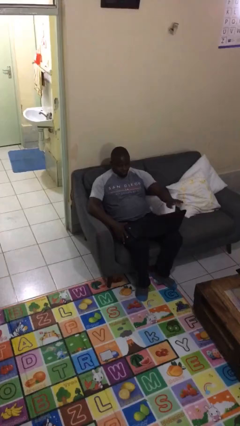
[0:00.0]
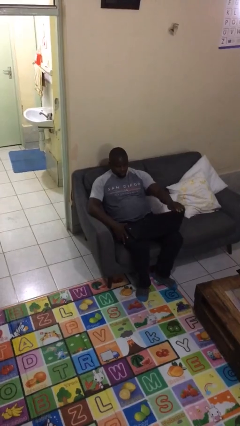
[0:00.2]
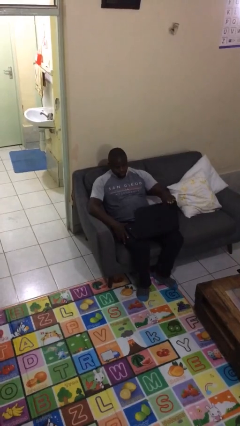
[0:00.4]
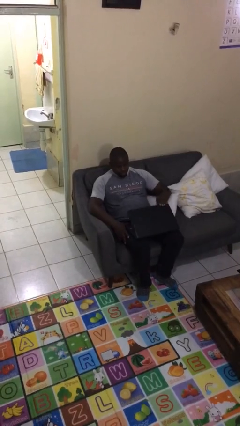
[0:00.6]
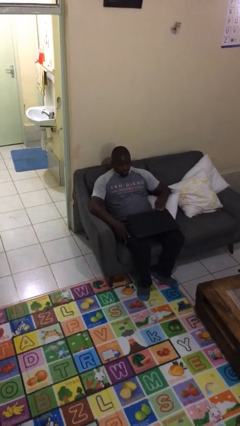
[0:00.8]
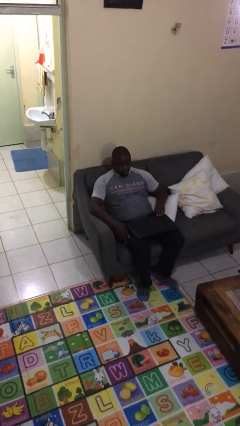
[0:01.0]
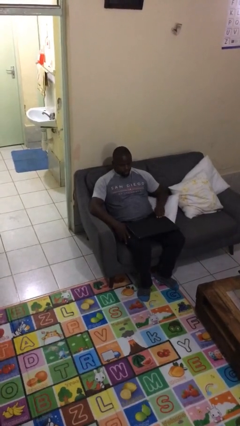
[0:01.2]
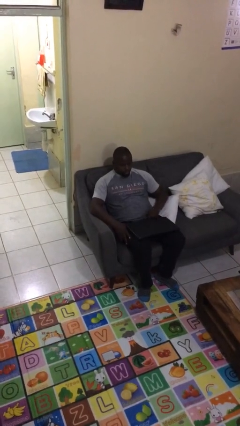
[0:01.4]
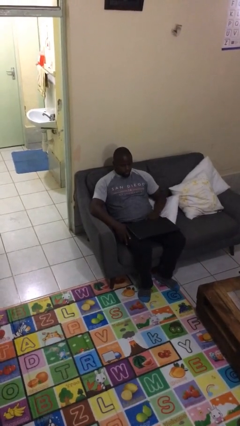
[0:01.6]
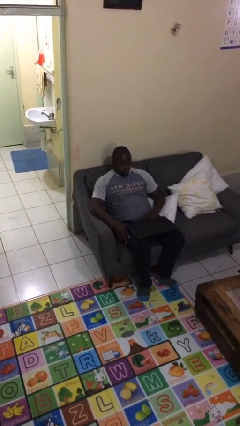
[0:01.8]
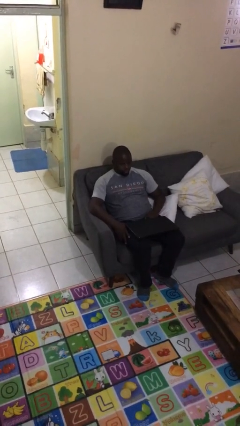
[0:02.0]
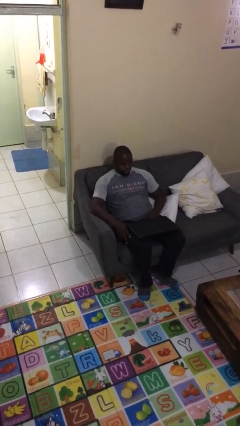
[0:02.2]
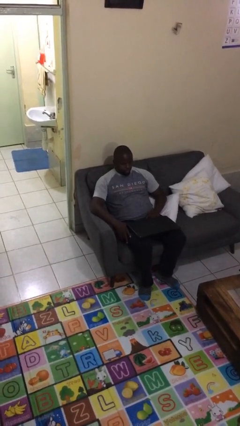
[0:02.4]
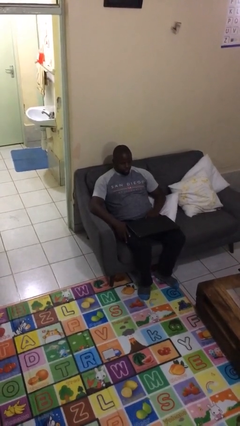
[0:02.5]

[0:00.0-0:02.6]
person closes laptop

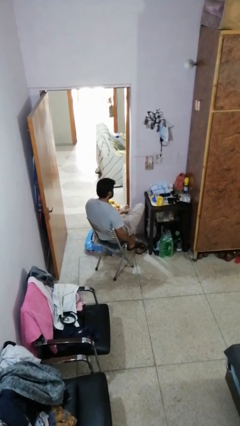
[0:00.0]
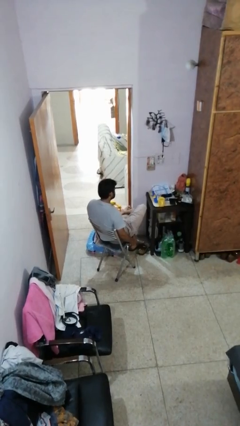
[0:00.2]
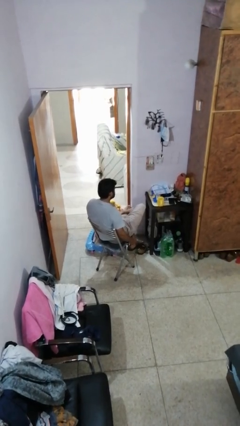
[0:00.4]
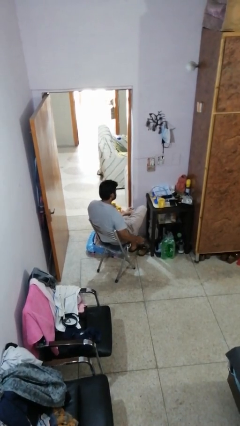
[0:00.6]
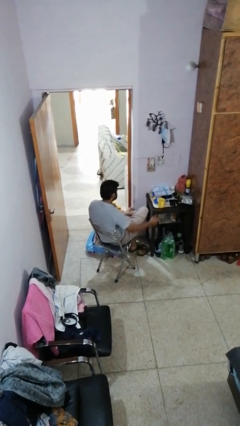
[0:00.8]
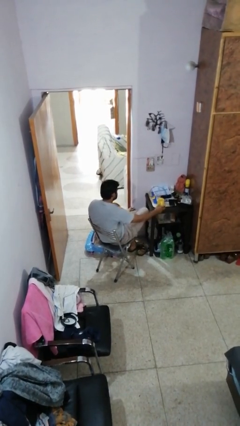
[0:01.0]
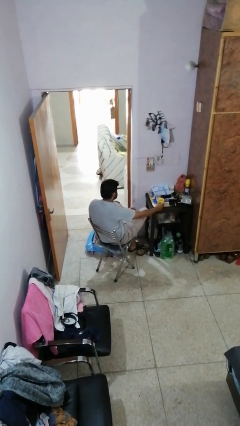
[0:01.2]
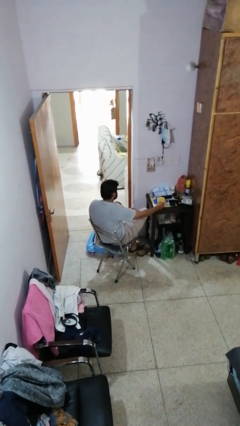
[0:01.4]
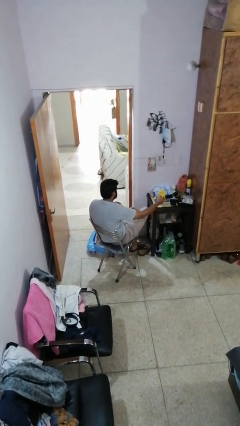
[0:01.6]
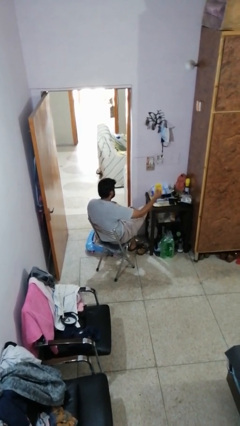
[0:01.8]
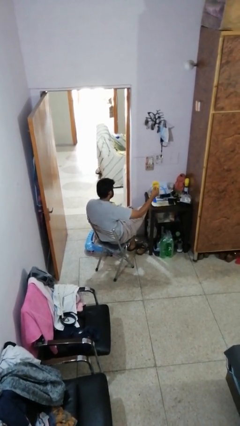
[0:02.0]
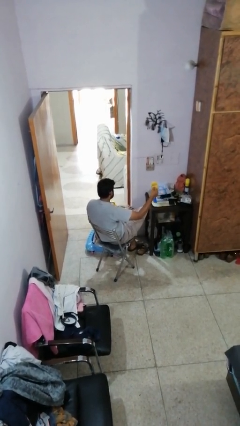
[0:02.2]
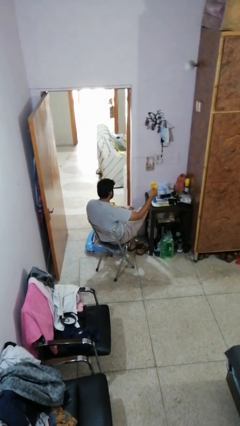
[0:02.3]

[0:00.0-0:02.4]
person picks up object from table

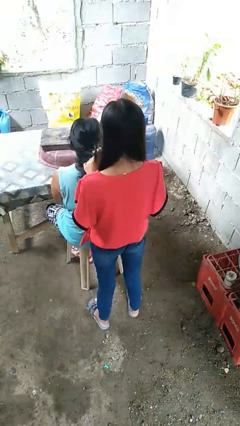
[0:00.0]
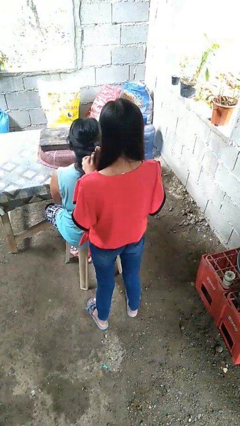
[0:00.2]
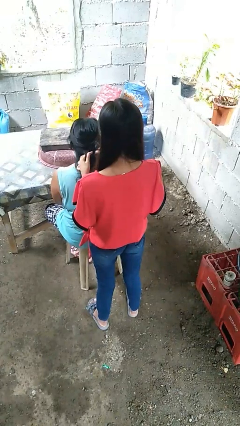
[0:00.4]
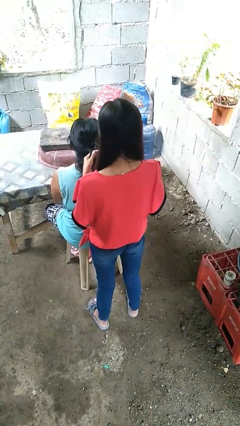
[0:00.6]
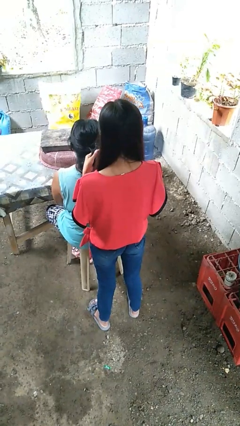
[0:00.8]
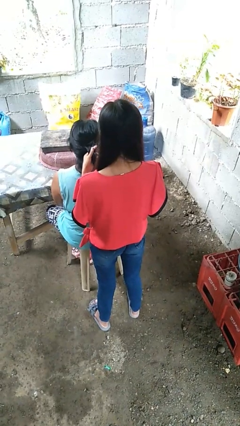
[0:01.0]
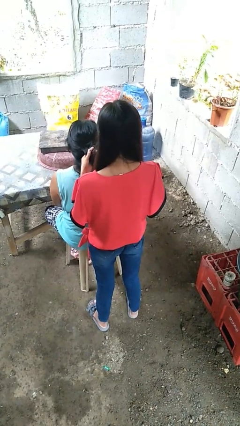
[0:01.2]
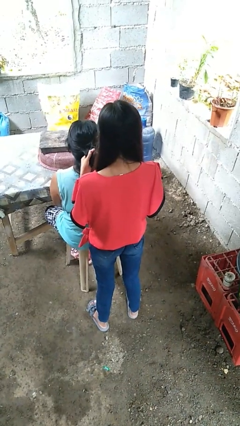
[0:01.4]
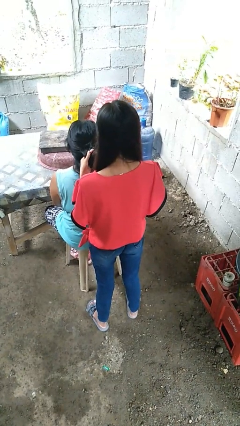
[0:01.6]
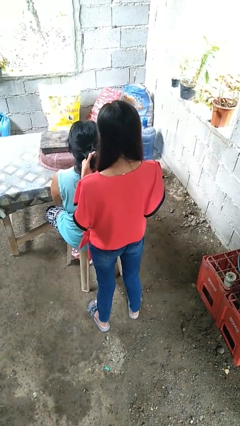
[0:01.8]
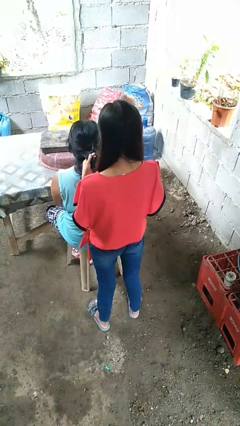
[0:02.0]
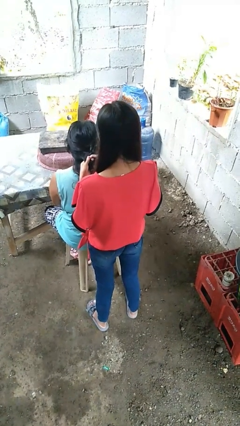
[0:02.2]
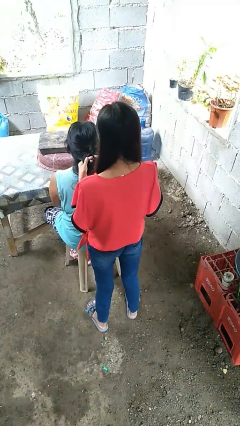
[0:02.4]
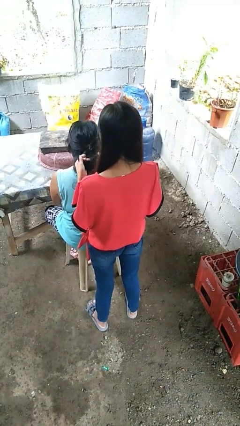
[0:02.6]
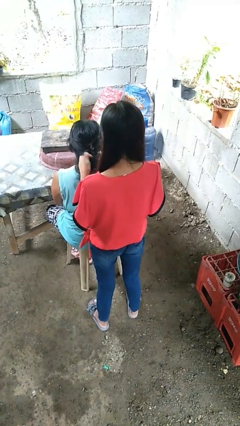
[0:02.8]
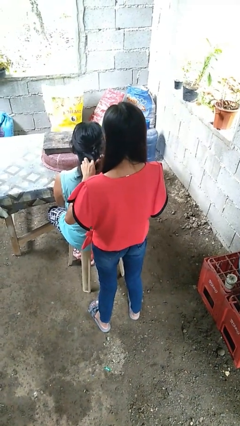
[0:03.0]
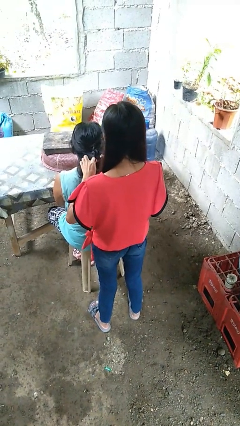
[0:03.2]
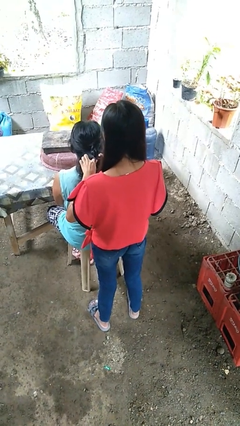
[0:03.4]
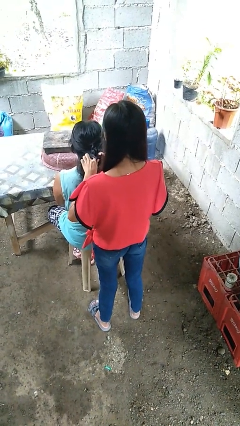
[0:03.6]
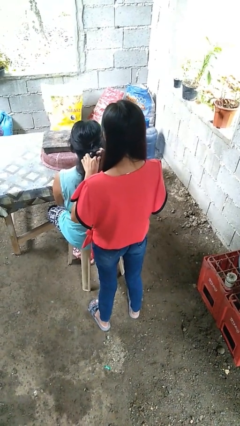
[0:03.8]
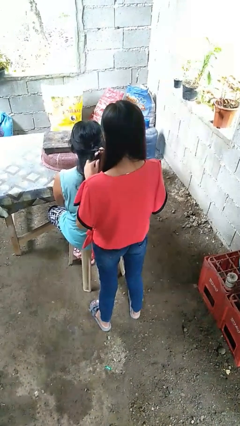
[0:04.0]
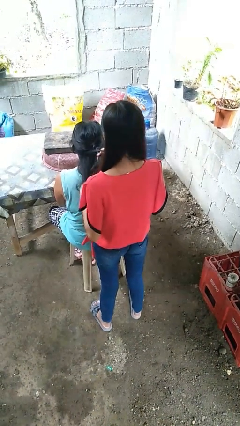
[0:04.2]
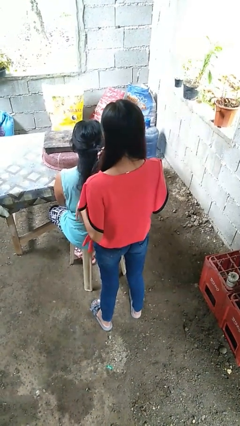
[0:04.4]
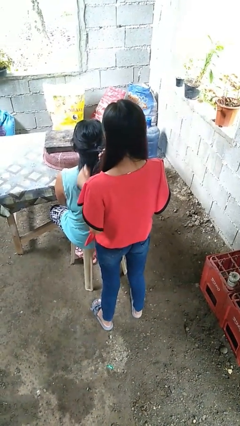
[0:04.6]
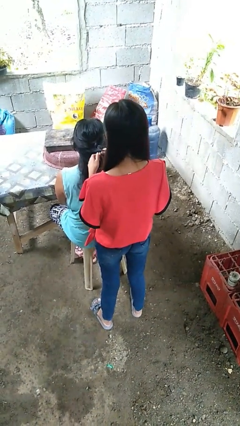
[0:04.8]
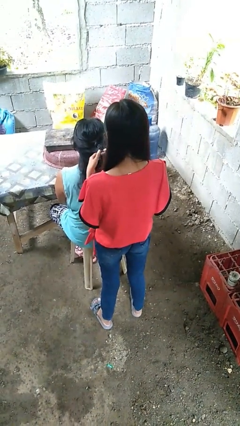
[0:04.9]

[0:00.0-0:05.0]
person braids hair of person

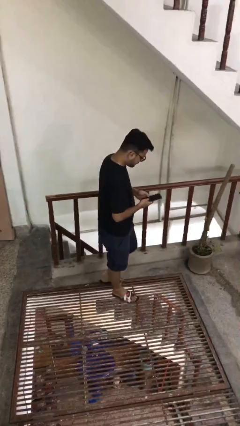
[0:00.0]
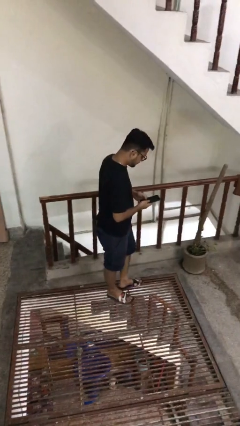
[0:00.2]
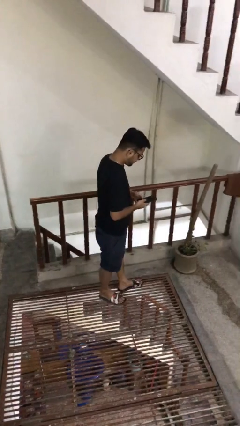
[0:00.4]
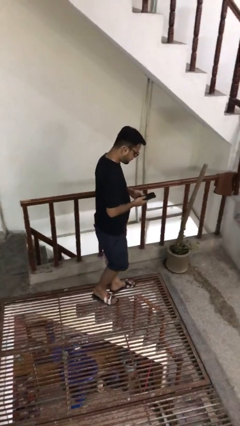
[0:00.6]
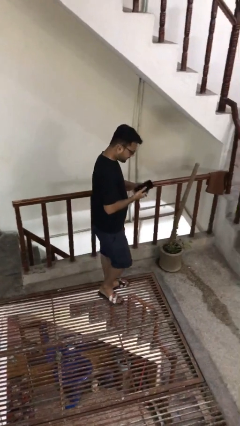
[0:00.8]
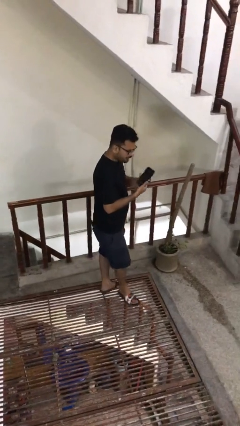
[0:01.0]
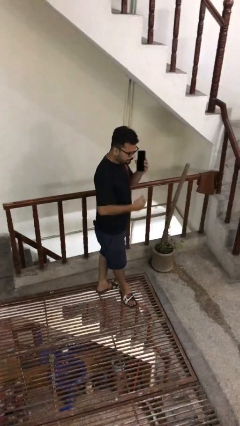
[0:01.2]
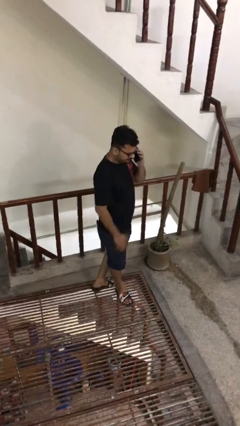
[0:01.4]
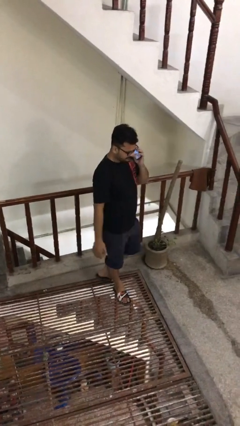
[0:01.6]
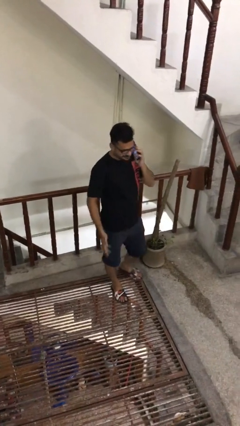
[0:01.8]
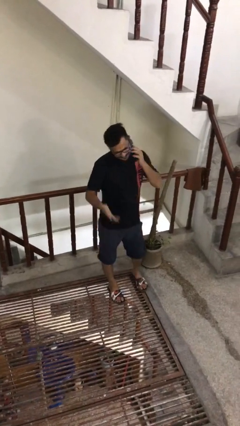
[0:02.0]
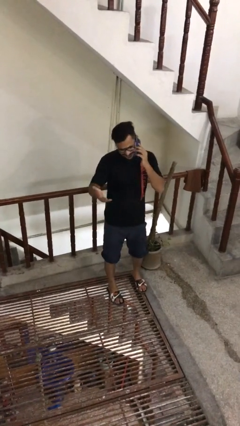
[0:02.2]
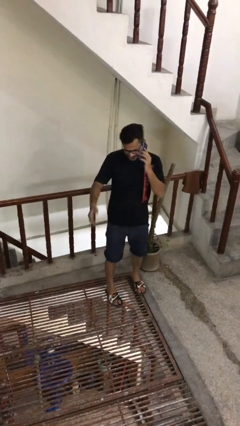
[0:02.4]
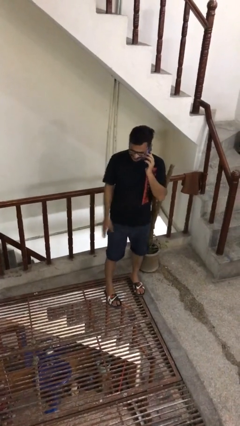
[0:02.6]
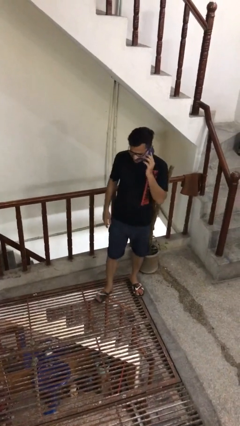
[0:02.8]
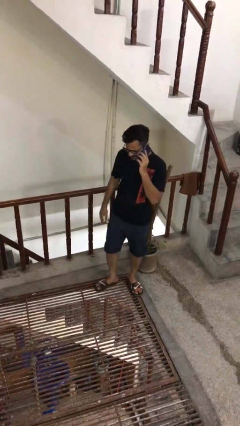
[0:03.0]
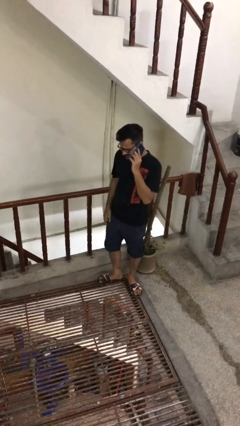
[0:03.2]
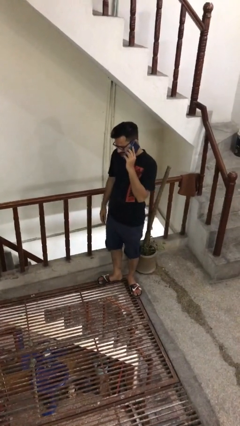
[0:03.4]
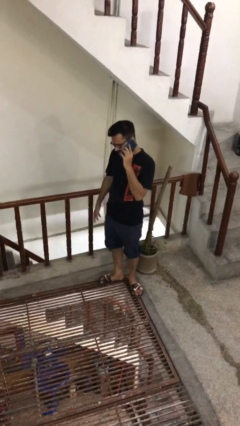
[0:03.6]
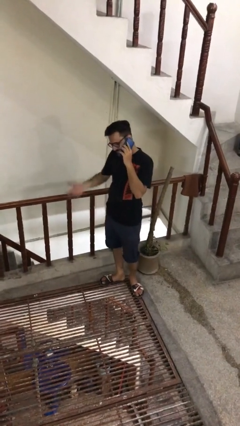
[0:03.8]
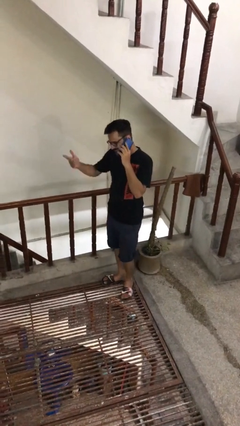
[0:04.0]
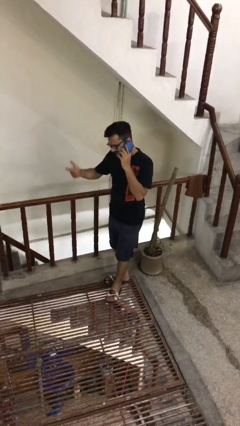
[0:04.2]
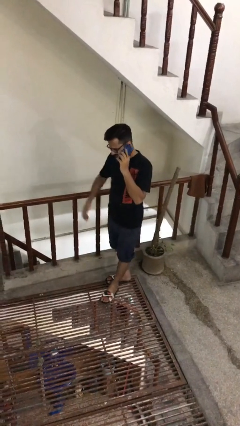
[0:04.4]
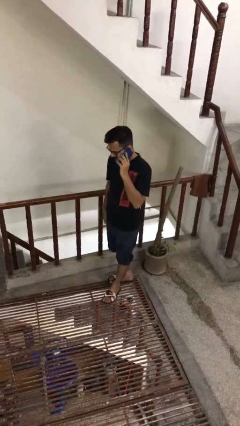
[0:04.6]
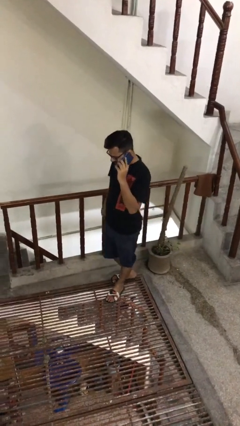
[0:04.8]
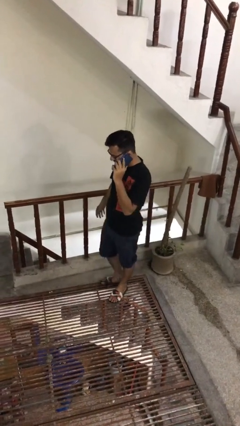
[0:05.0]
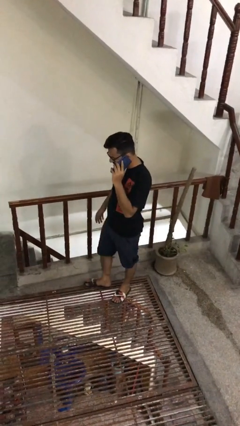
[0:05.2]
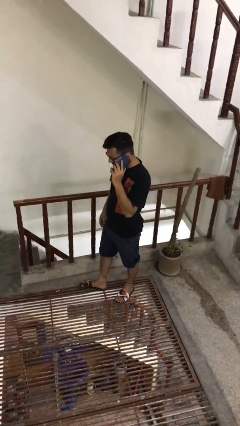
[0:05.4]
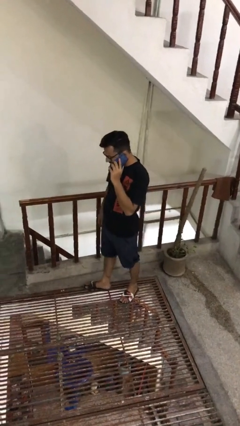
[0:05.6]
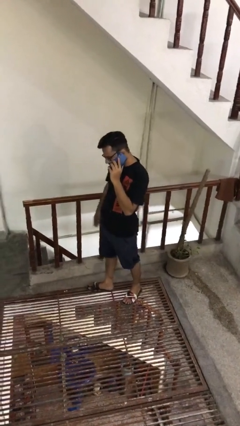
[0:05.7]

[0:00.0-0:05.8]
person talks on phone

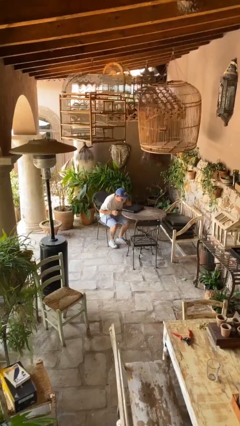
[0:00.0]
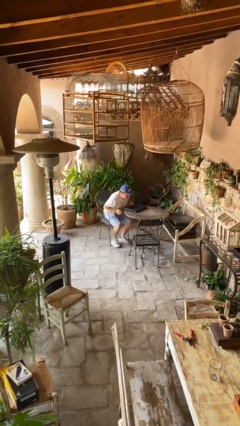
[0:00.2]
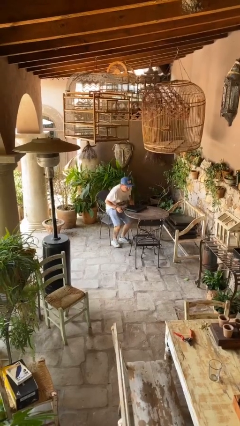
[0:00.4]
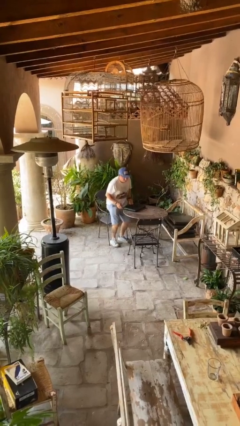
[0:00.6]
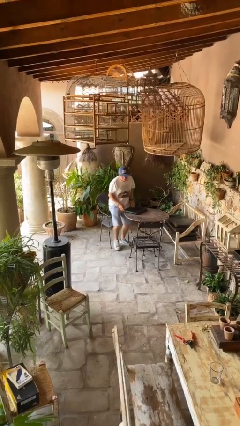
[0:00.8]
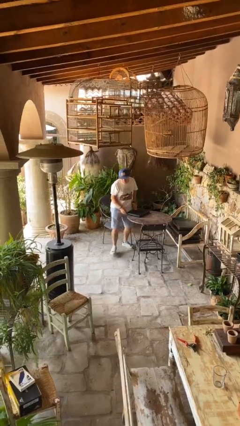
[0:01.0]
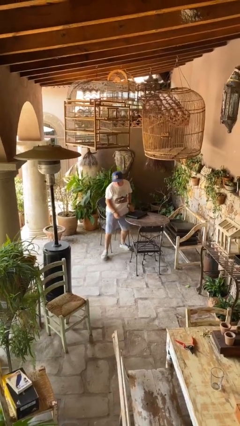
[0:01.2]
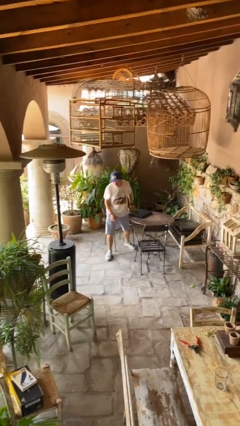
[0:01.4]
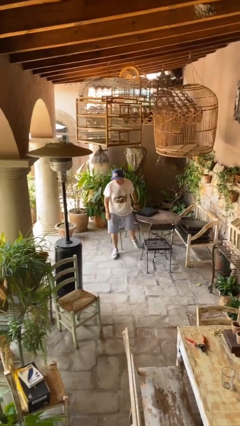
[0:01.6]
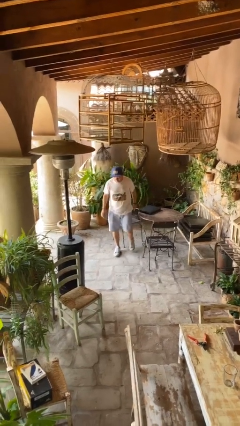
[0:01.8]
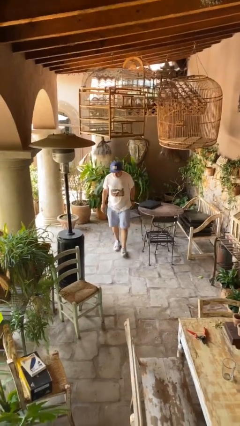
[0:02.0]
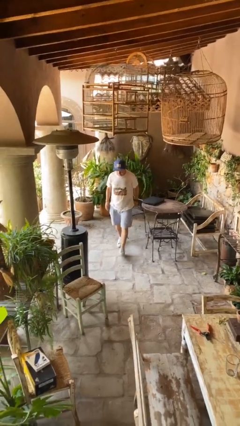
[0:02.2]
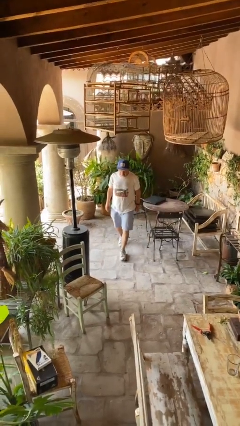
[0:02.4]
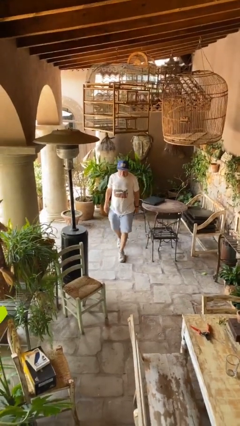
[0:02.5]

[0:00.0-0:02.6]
person stands up
